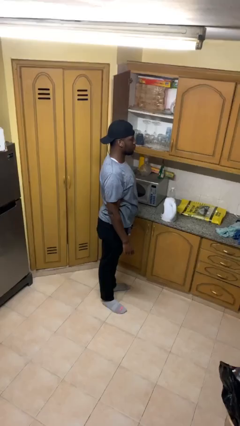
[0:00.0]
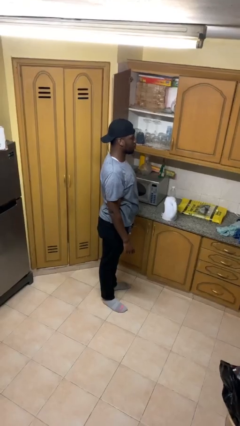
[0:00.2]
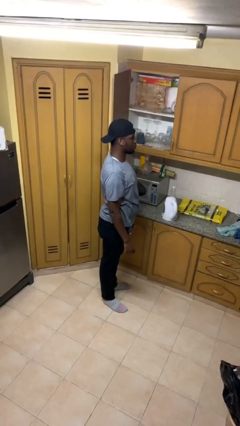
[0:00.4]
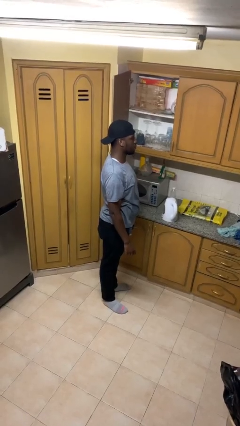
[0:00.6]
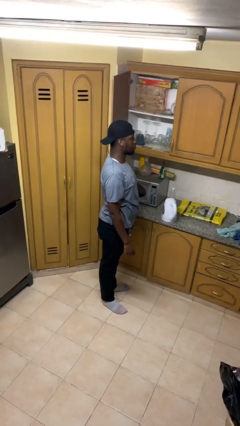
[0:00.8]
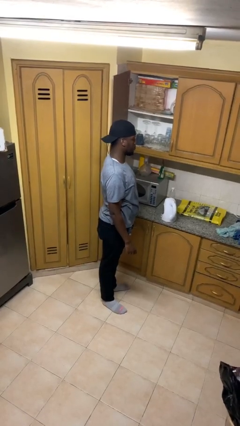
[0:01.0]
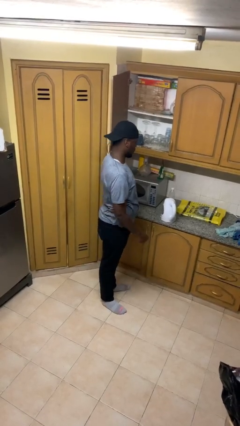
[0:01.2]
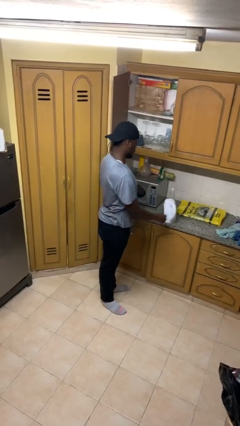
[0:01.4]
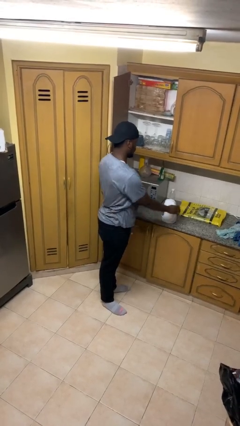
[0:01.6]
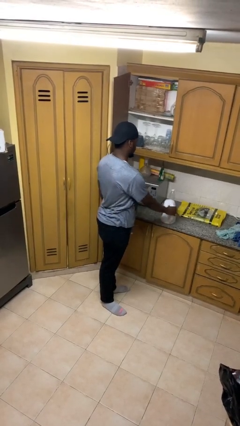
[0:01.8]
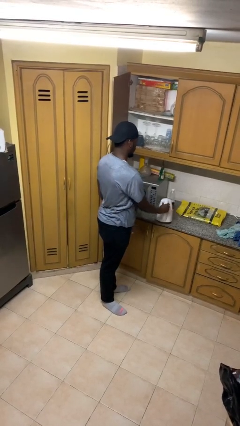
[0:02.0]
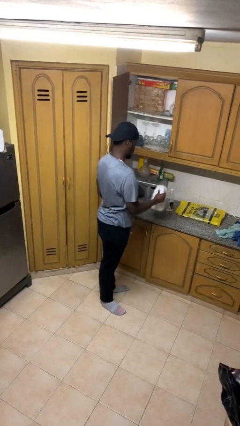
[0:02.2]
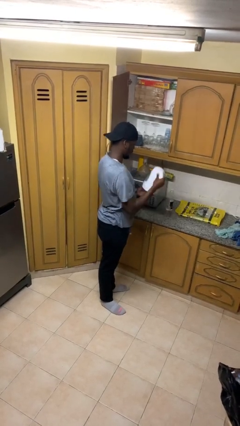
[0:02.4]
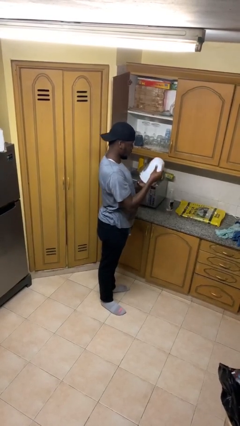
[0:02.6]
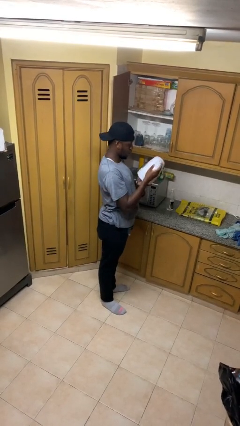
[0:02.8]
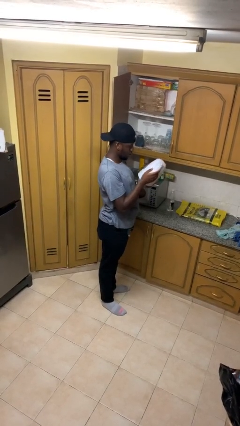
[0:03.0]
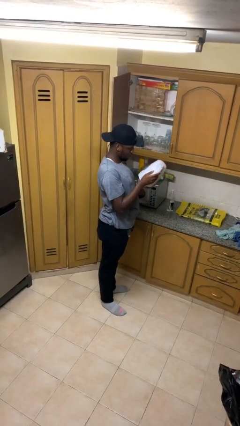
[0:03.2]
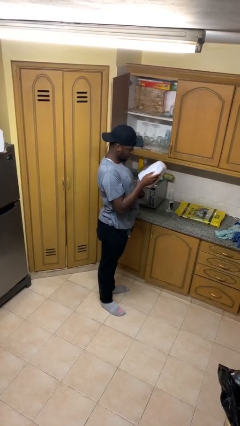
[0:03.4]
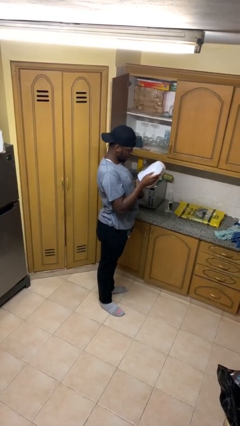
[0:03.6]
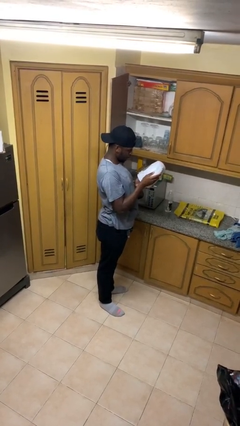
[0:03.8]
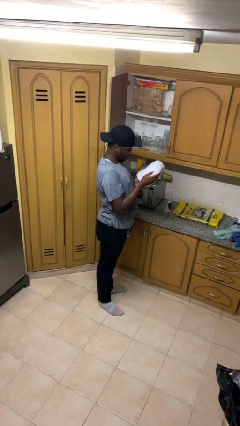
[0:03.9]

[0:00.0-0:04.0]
person picks up object from table

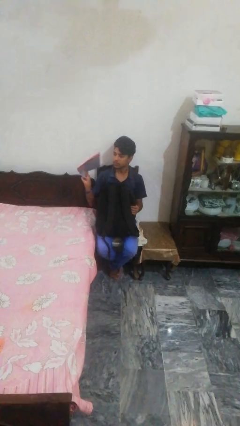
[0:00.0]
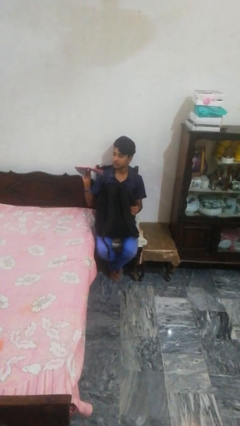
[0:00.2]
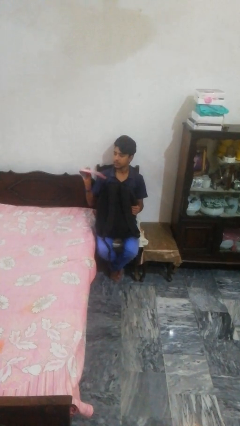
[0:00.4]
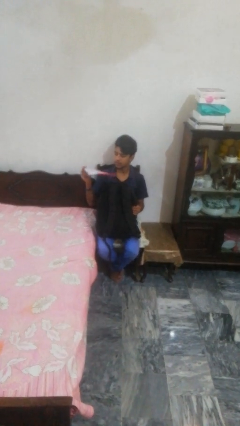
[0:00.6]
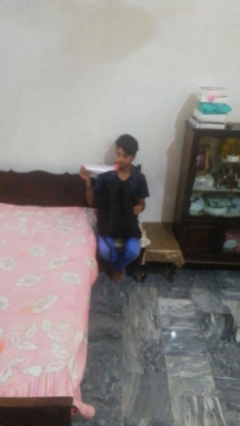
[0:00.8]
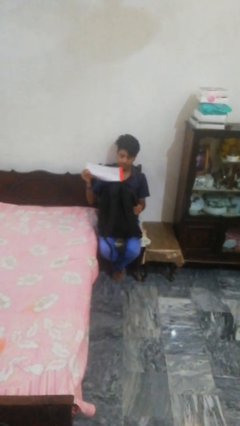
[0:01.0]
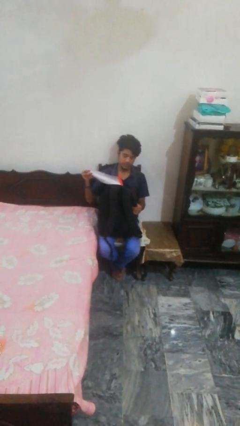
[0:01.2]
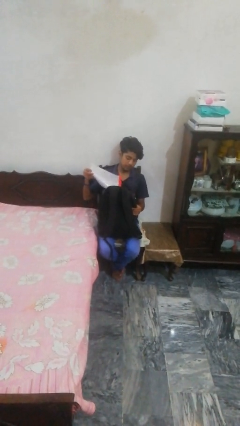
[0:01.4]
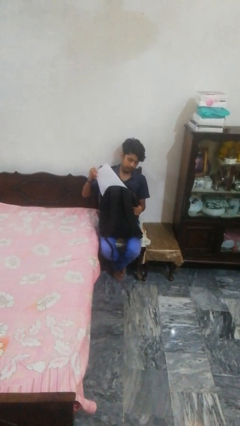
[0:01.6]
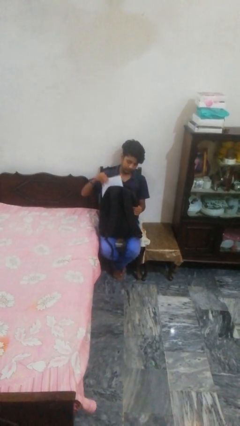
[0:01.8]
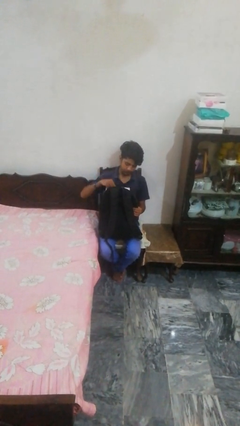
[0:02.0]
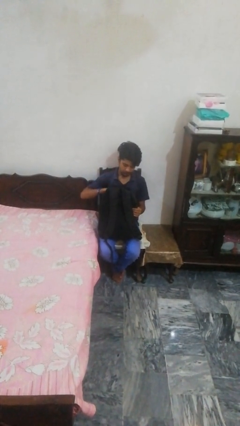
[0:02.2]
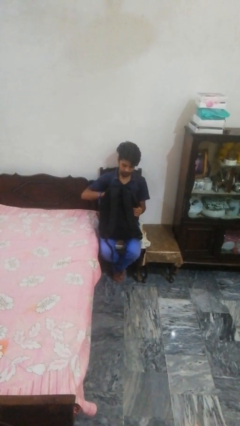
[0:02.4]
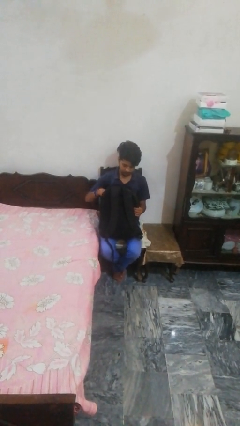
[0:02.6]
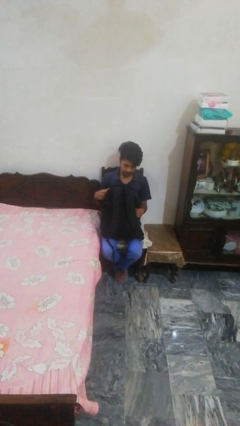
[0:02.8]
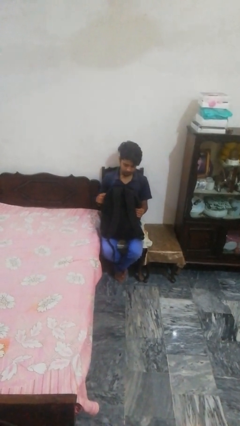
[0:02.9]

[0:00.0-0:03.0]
person puts object into backpack

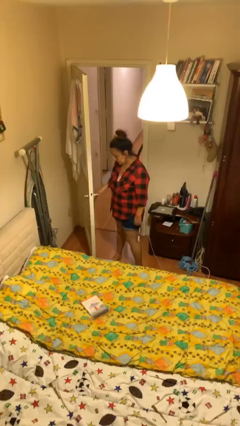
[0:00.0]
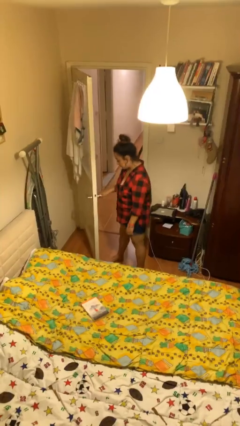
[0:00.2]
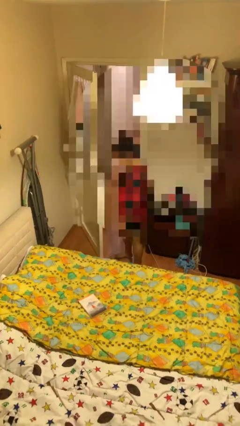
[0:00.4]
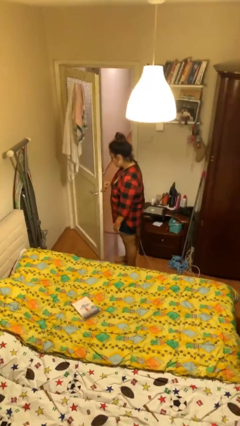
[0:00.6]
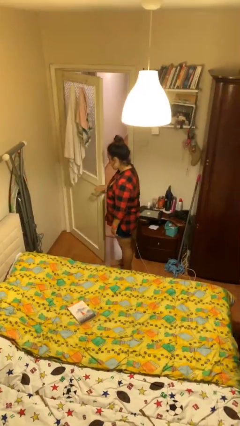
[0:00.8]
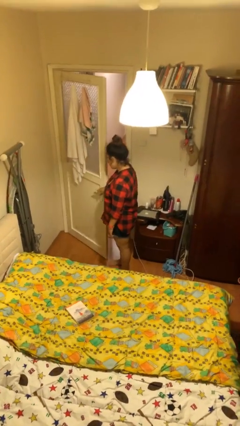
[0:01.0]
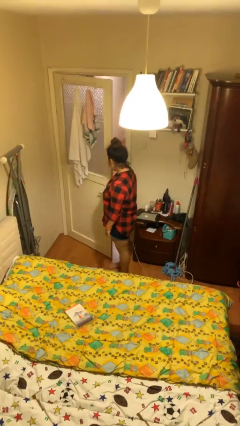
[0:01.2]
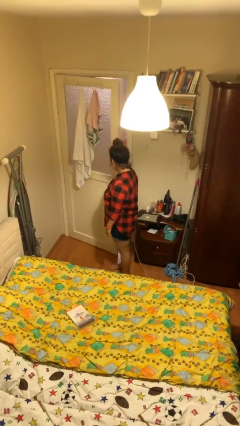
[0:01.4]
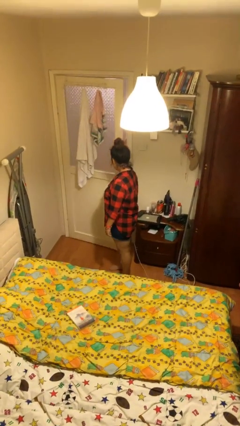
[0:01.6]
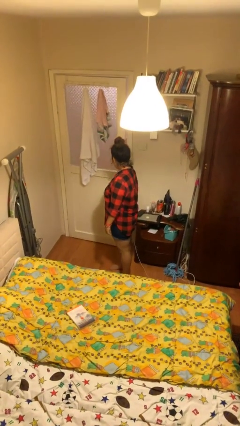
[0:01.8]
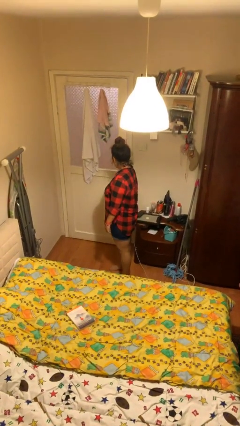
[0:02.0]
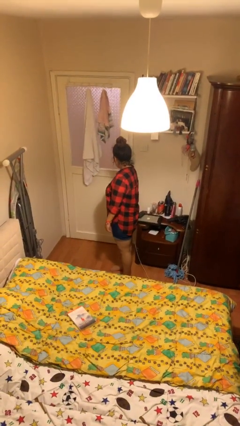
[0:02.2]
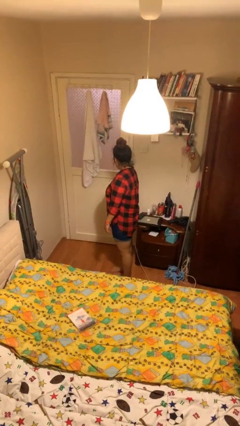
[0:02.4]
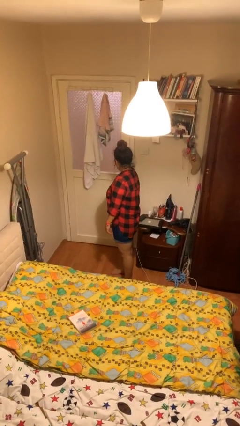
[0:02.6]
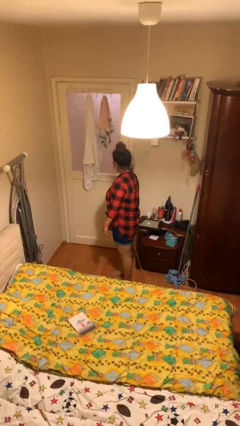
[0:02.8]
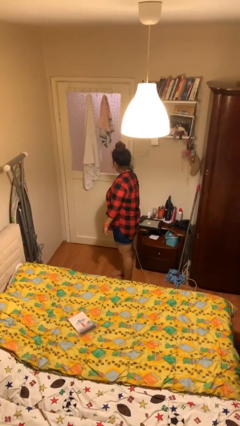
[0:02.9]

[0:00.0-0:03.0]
person closes facility door

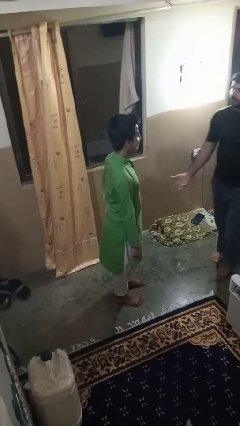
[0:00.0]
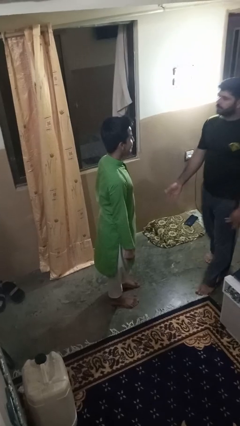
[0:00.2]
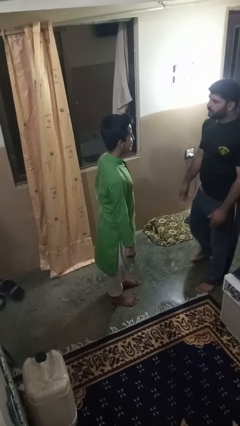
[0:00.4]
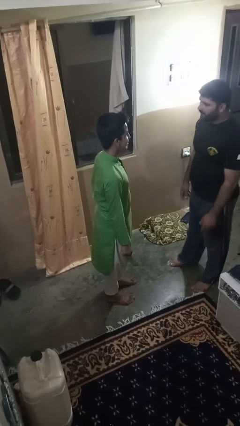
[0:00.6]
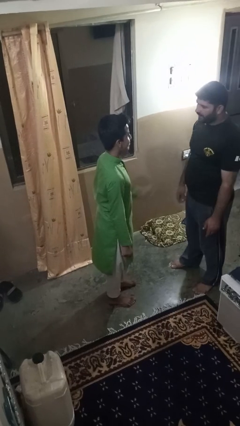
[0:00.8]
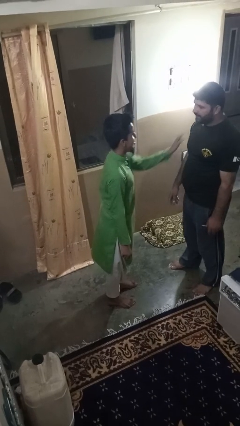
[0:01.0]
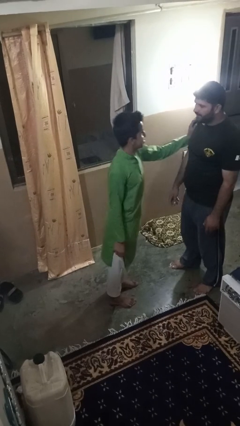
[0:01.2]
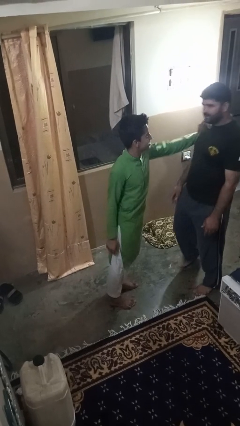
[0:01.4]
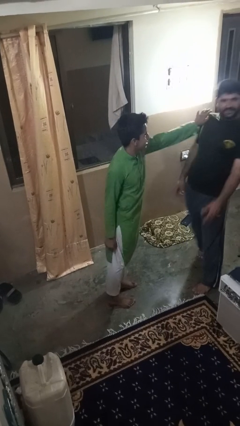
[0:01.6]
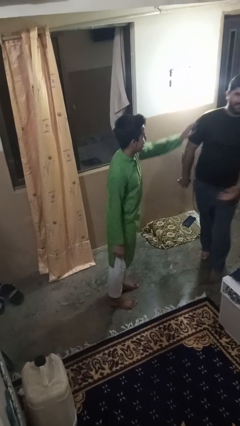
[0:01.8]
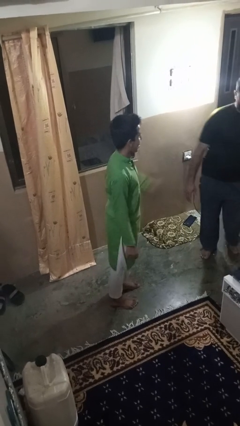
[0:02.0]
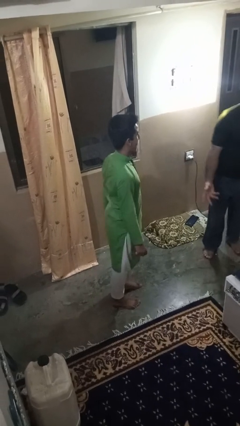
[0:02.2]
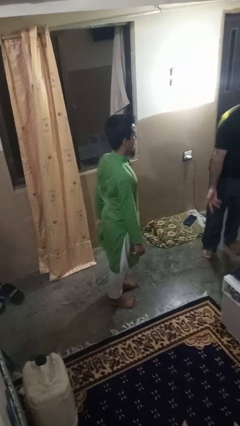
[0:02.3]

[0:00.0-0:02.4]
person shoves person

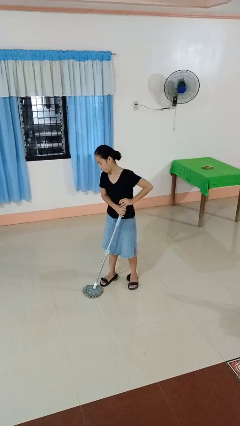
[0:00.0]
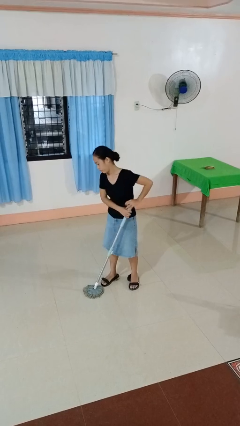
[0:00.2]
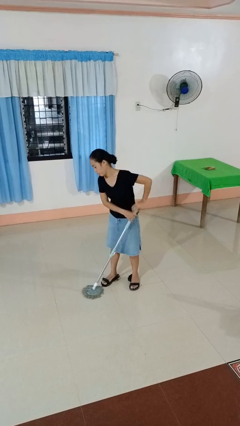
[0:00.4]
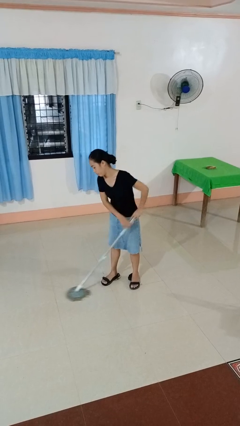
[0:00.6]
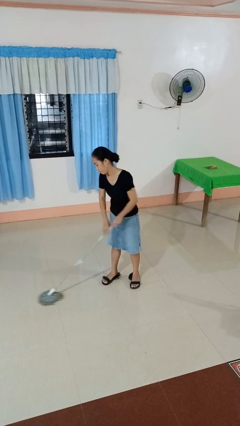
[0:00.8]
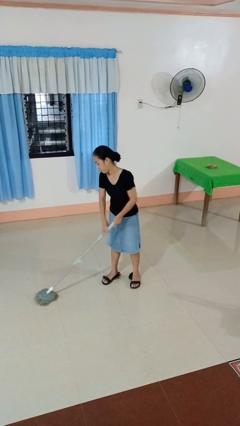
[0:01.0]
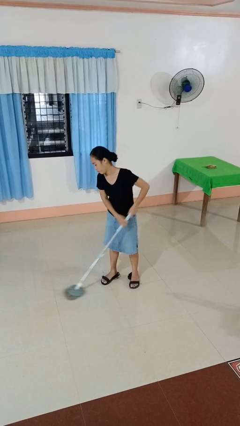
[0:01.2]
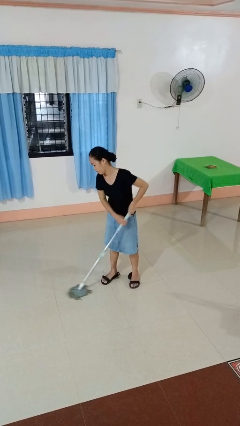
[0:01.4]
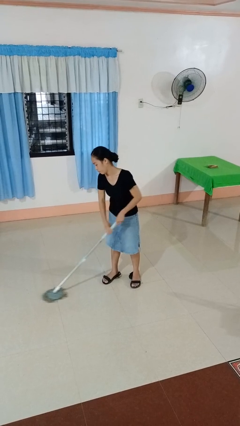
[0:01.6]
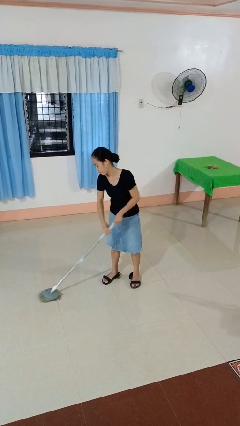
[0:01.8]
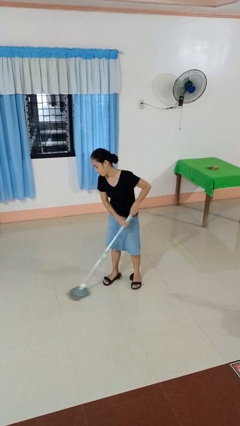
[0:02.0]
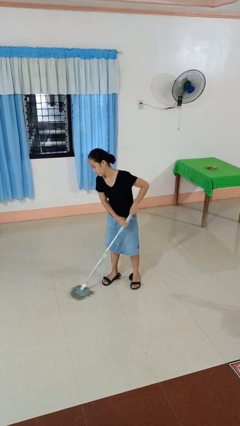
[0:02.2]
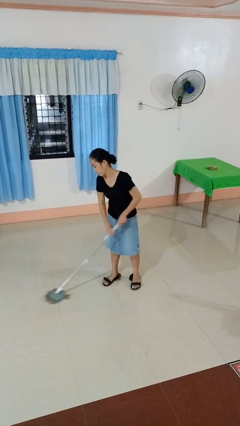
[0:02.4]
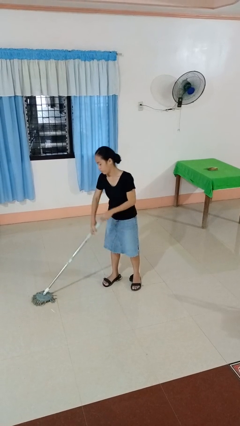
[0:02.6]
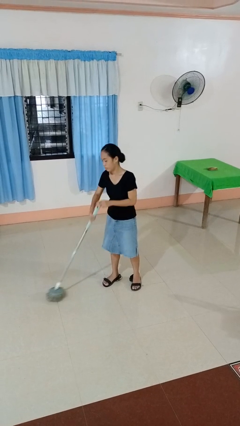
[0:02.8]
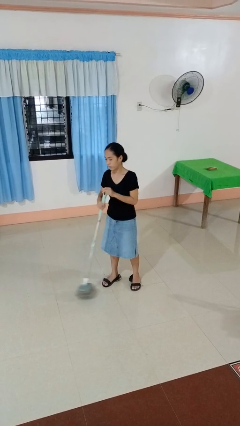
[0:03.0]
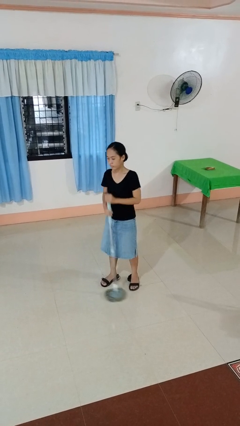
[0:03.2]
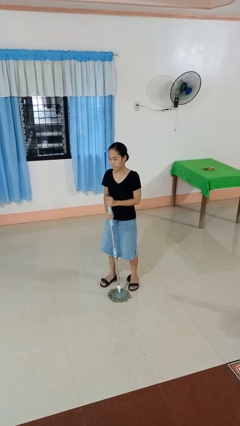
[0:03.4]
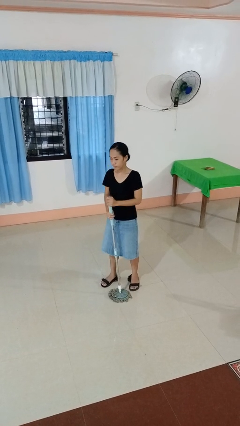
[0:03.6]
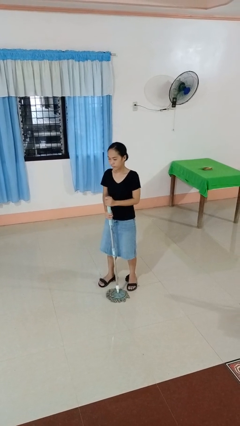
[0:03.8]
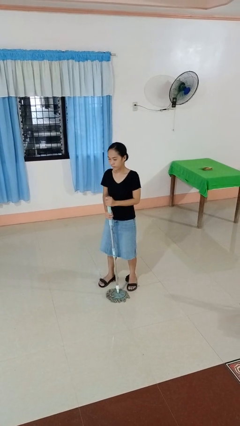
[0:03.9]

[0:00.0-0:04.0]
person mops

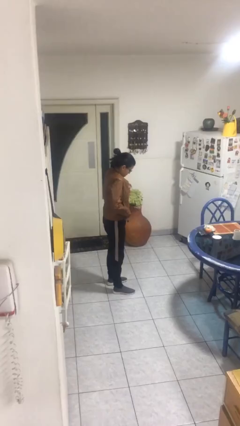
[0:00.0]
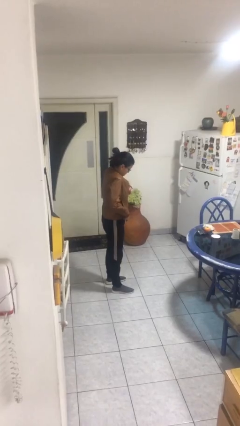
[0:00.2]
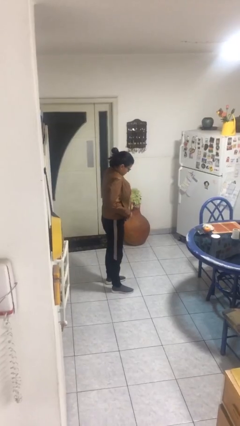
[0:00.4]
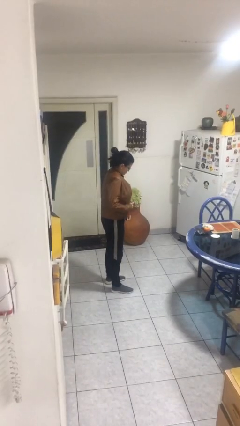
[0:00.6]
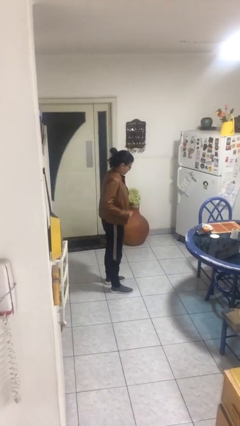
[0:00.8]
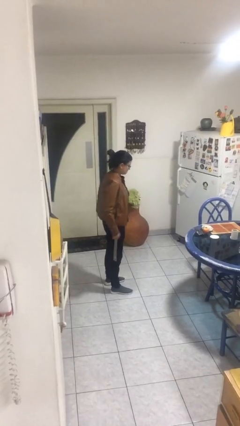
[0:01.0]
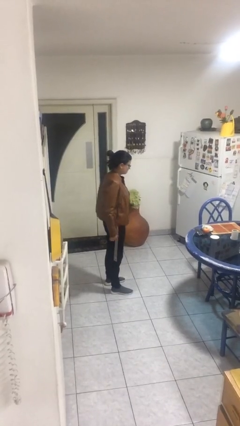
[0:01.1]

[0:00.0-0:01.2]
person unzips jacket
